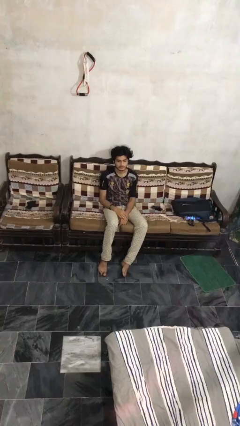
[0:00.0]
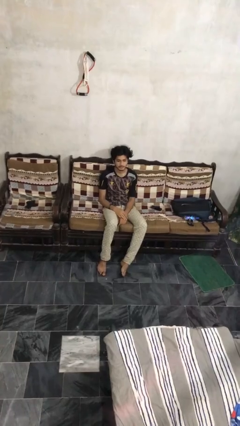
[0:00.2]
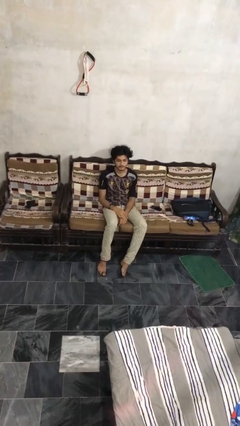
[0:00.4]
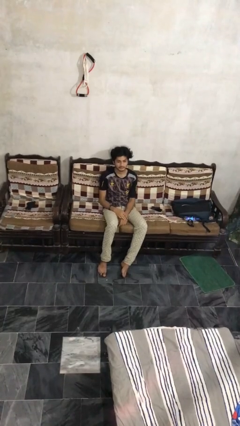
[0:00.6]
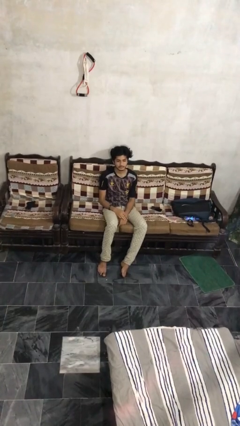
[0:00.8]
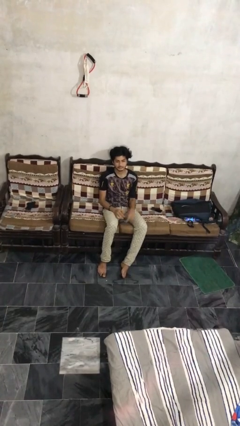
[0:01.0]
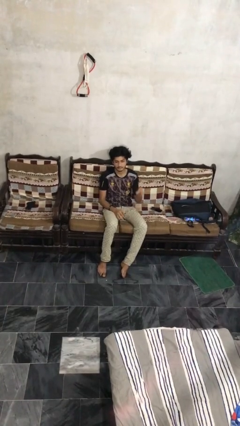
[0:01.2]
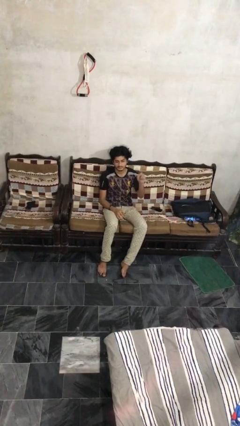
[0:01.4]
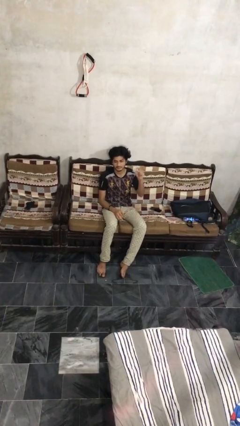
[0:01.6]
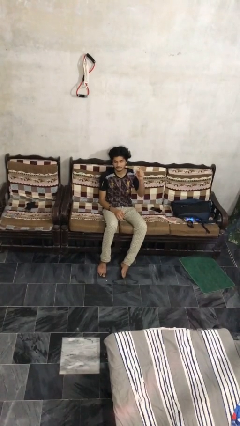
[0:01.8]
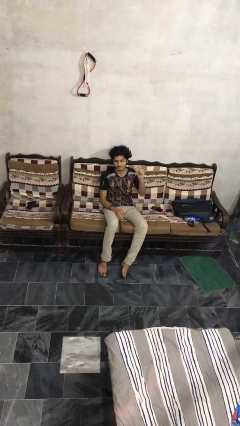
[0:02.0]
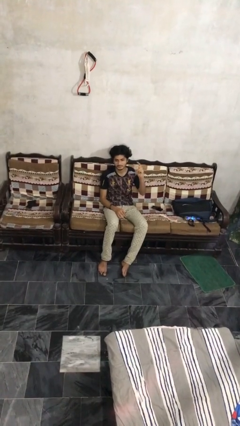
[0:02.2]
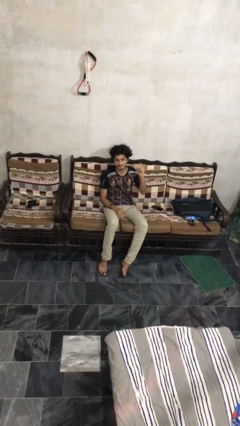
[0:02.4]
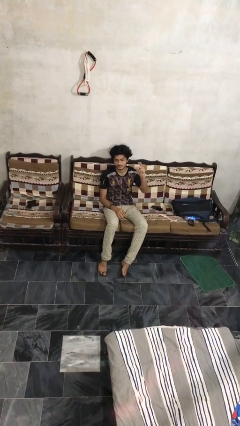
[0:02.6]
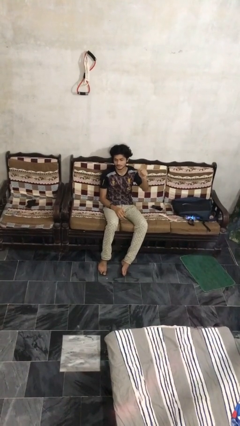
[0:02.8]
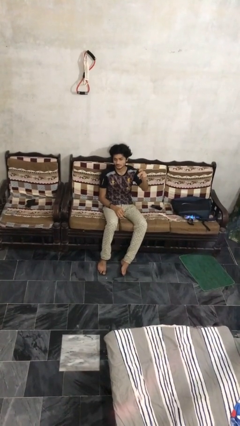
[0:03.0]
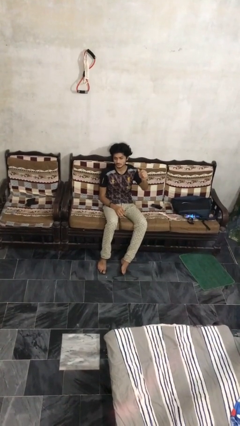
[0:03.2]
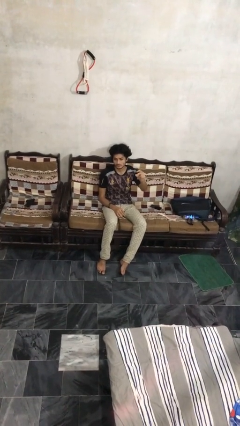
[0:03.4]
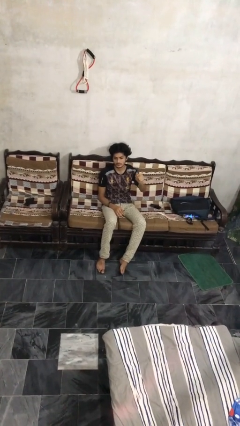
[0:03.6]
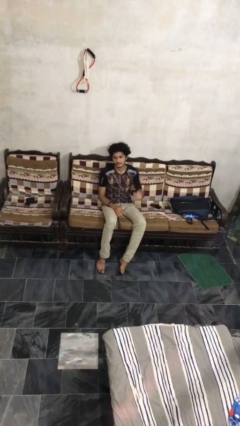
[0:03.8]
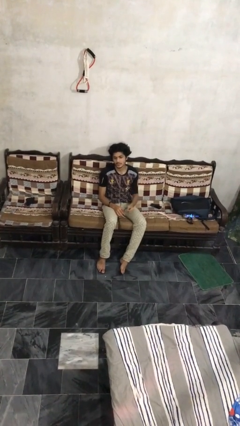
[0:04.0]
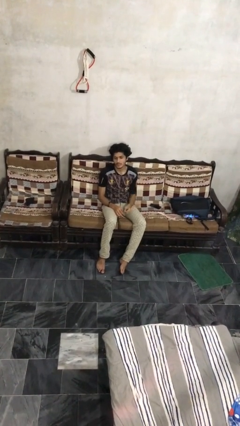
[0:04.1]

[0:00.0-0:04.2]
person snaps fingers

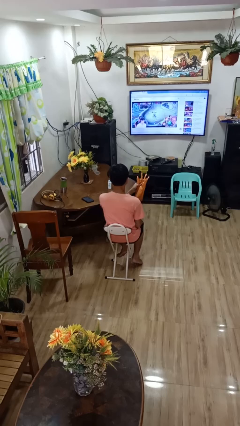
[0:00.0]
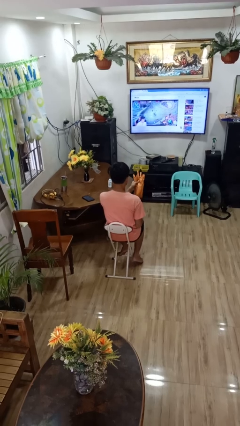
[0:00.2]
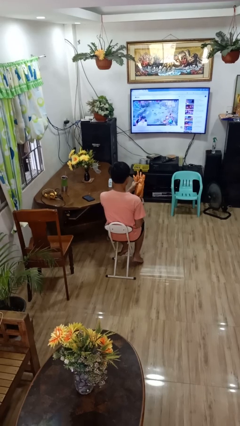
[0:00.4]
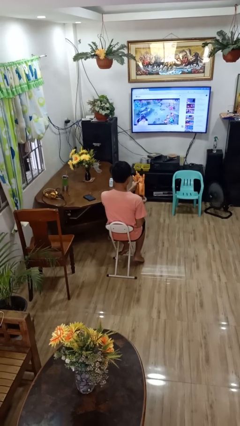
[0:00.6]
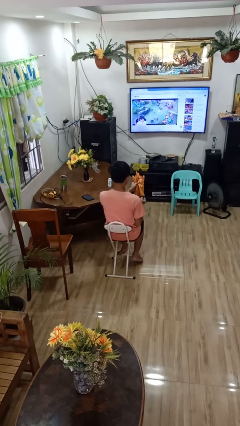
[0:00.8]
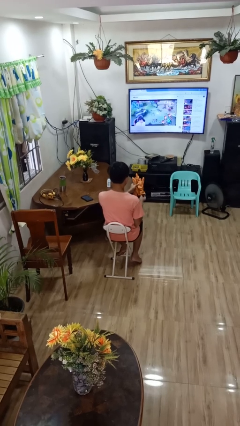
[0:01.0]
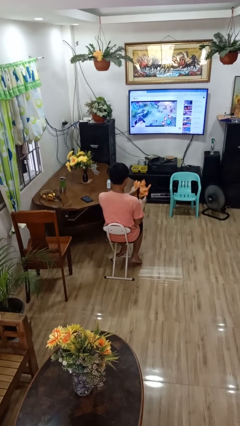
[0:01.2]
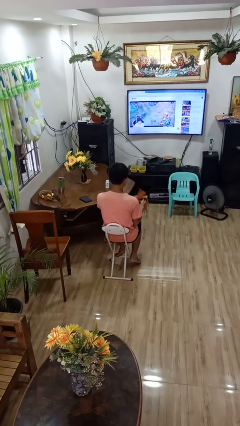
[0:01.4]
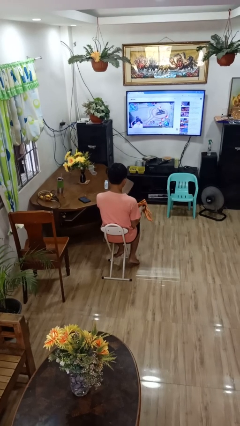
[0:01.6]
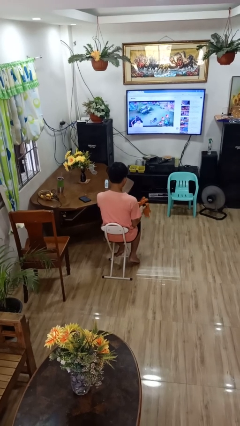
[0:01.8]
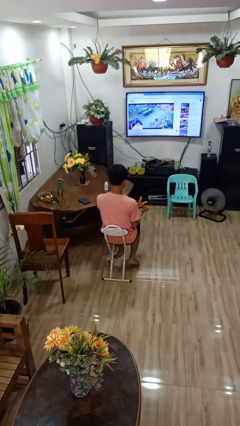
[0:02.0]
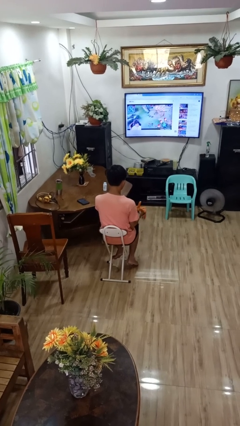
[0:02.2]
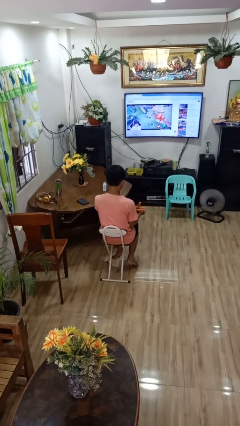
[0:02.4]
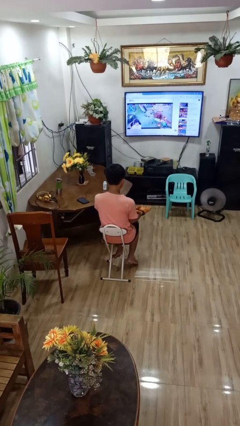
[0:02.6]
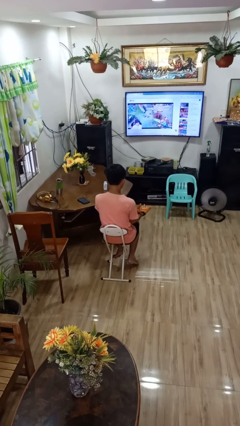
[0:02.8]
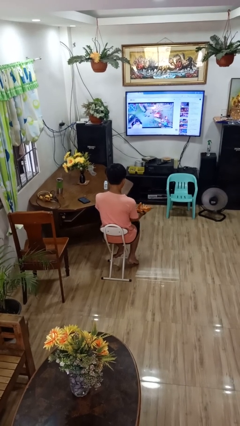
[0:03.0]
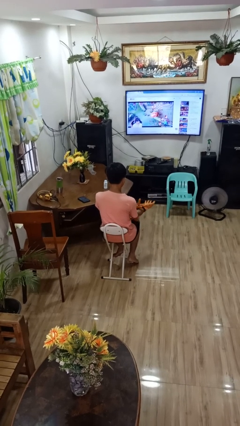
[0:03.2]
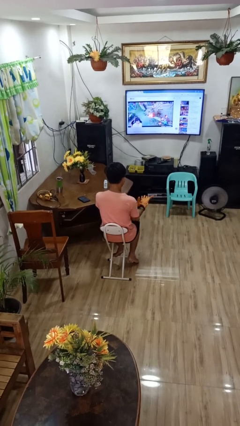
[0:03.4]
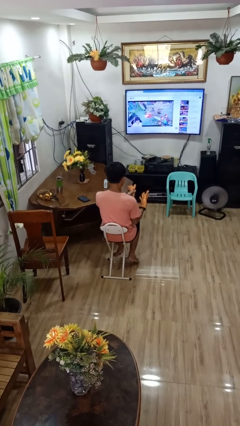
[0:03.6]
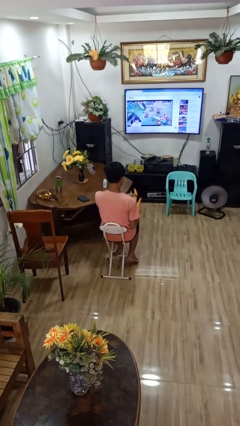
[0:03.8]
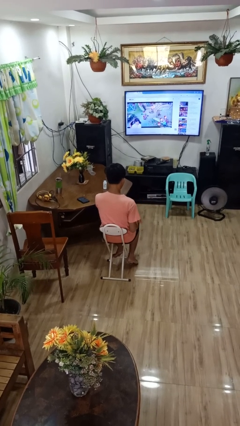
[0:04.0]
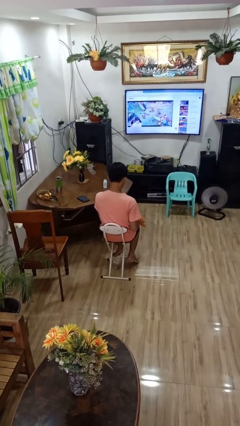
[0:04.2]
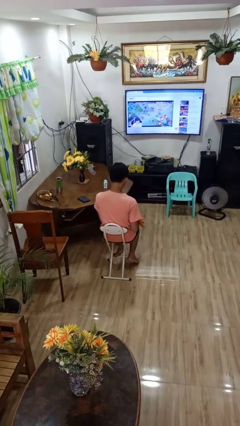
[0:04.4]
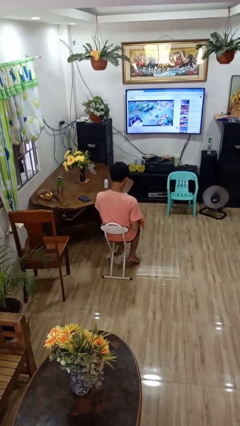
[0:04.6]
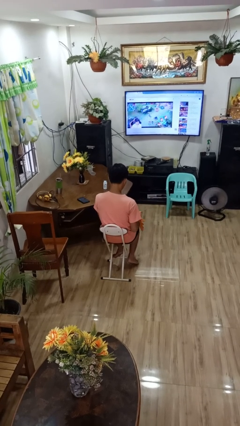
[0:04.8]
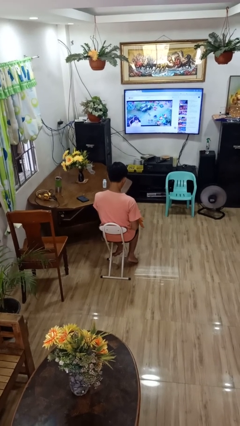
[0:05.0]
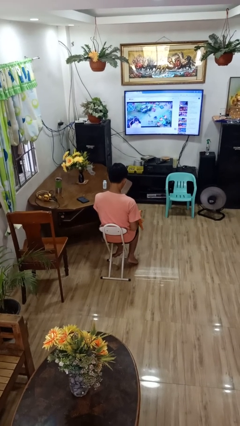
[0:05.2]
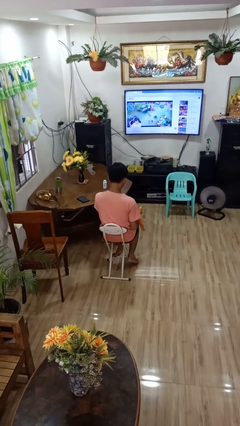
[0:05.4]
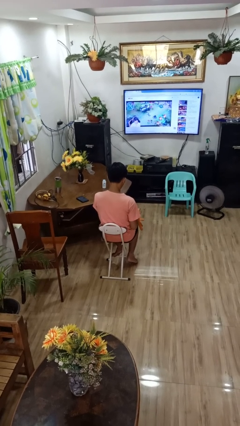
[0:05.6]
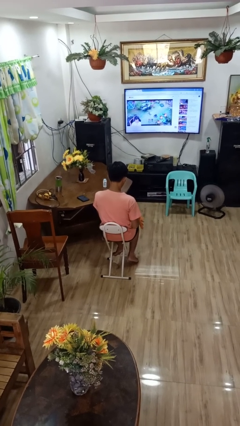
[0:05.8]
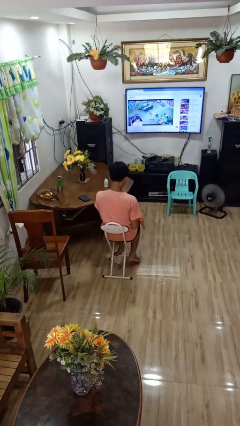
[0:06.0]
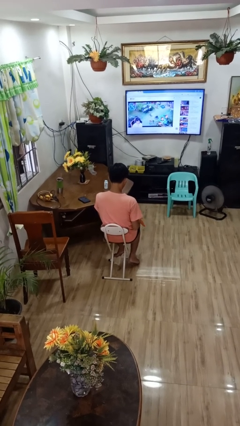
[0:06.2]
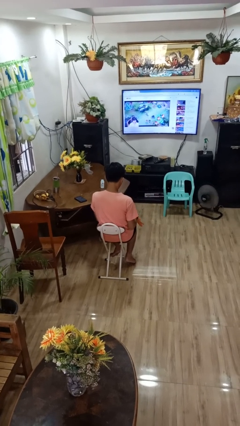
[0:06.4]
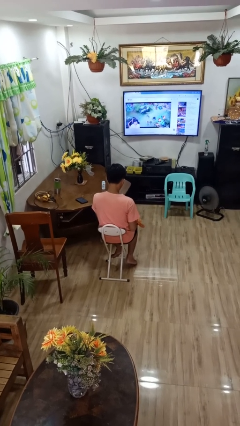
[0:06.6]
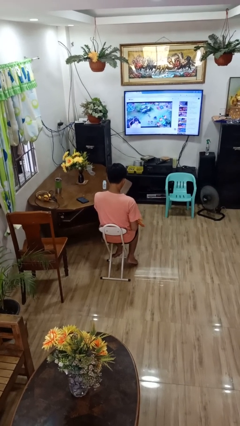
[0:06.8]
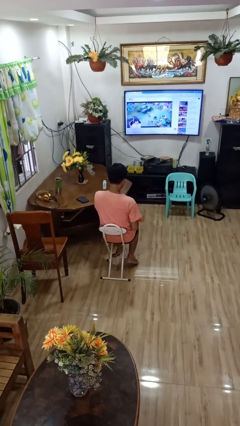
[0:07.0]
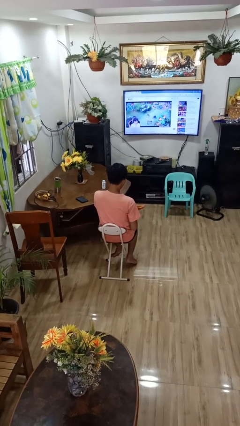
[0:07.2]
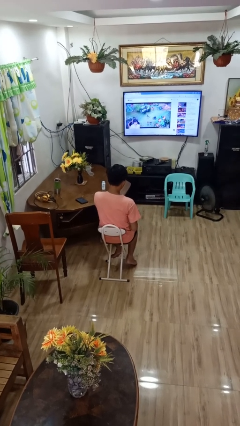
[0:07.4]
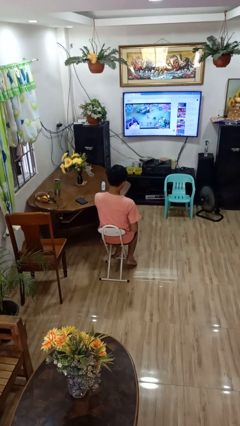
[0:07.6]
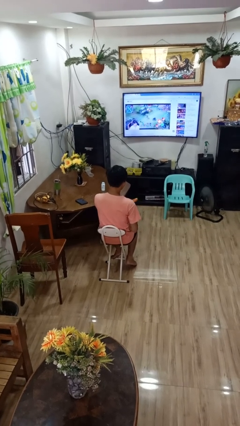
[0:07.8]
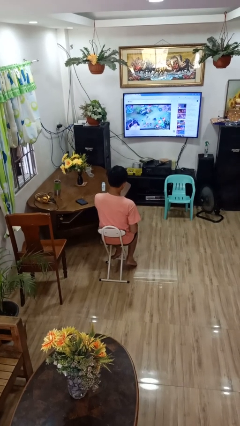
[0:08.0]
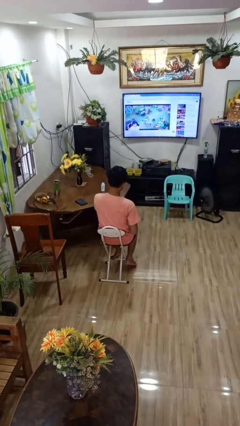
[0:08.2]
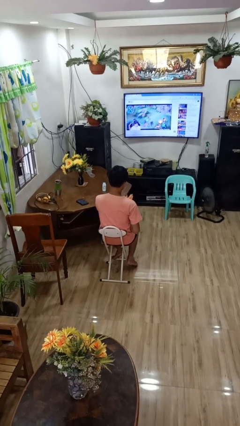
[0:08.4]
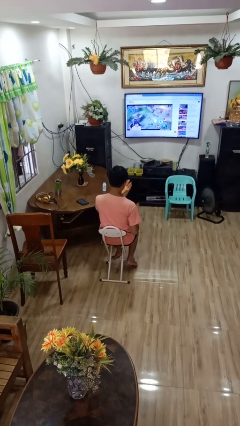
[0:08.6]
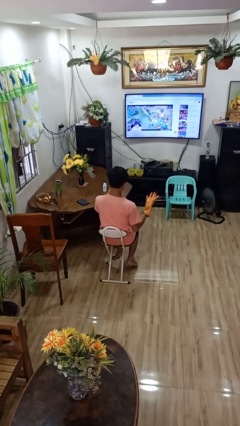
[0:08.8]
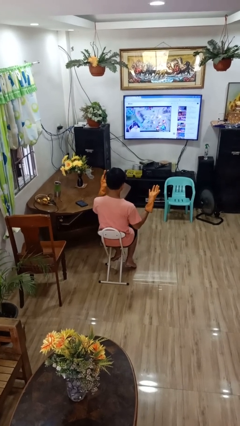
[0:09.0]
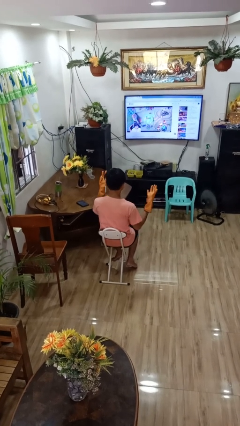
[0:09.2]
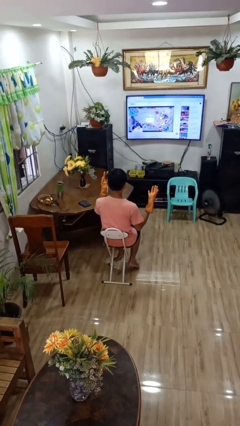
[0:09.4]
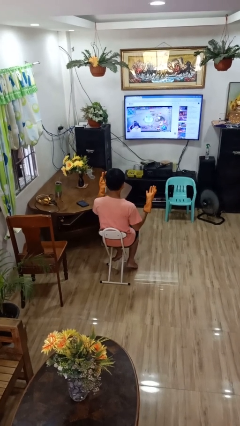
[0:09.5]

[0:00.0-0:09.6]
person puts on gloves

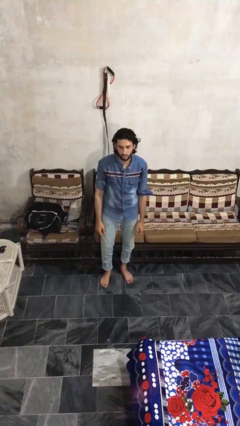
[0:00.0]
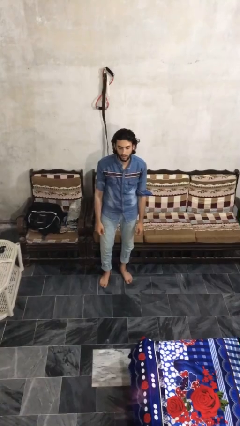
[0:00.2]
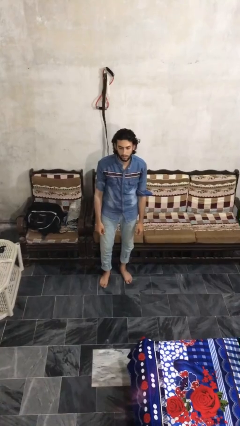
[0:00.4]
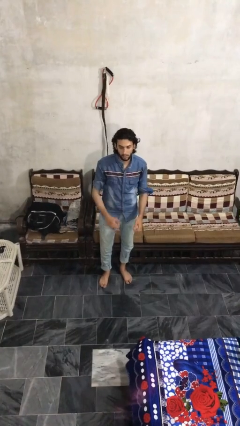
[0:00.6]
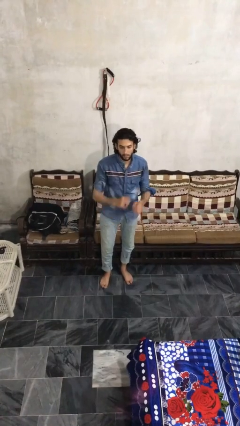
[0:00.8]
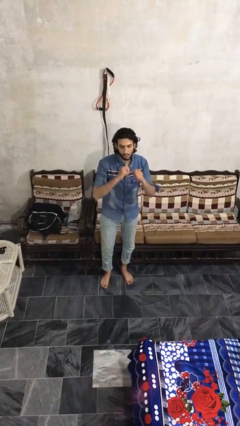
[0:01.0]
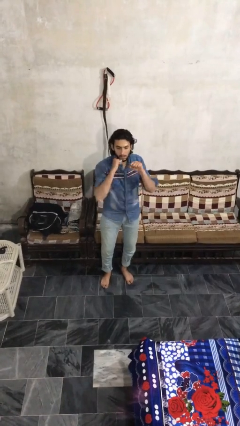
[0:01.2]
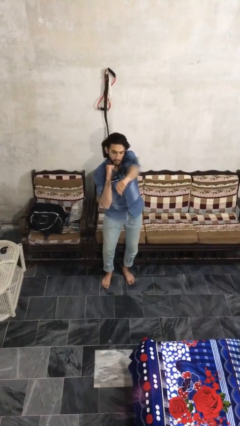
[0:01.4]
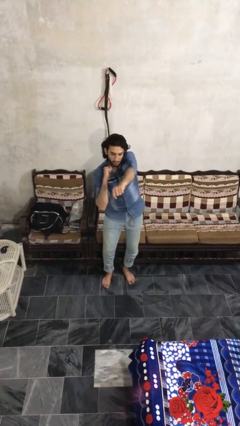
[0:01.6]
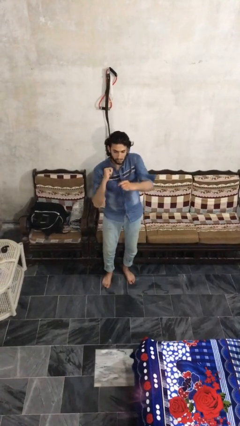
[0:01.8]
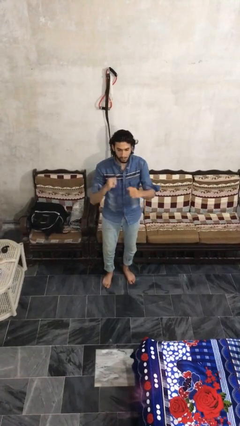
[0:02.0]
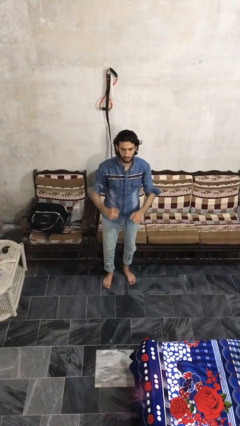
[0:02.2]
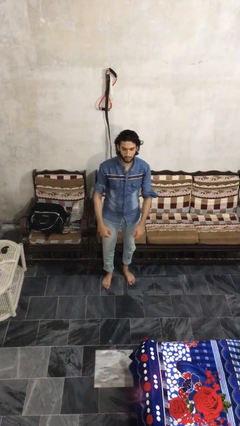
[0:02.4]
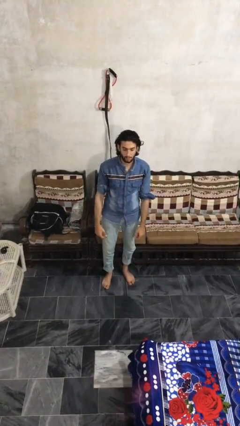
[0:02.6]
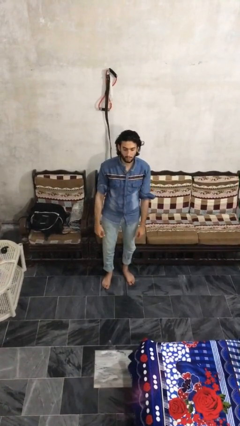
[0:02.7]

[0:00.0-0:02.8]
person punches

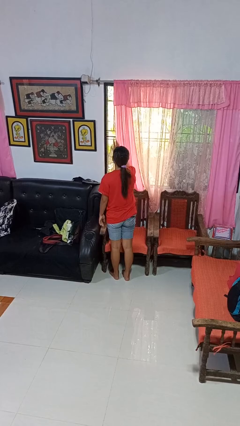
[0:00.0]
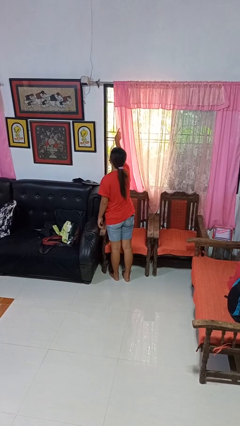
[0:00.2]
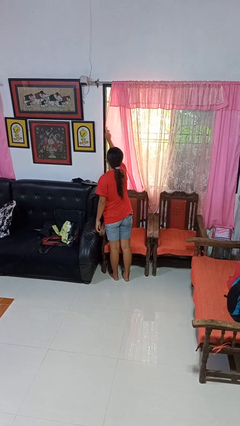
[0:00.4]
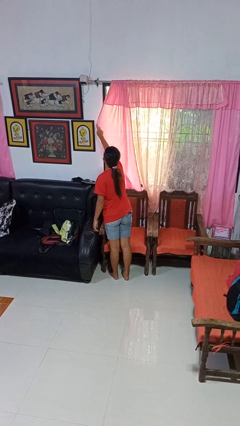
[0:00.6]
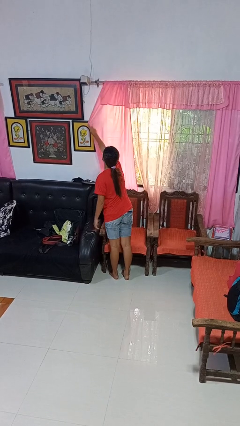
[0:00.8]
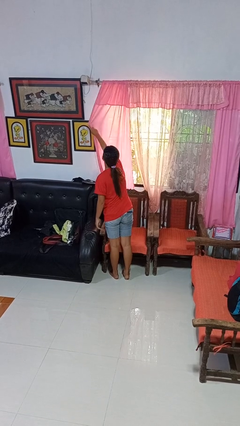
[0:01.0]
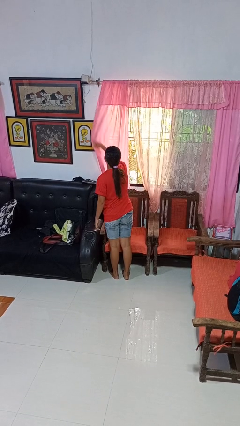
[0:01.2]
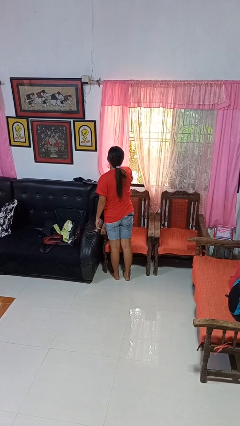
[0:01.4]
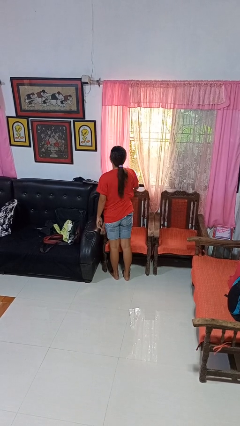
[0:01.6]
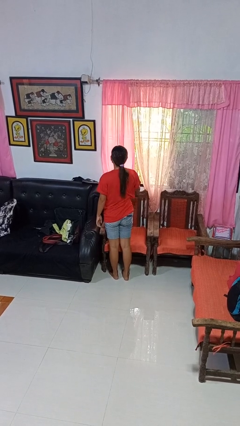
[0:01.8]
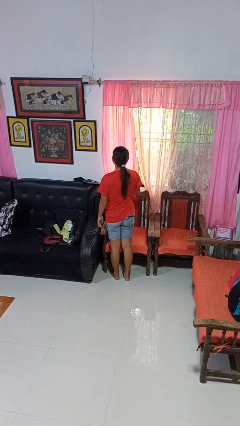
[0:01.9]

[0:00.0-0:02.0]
person closes curtains
